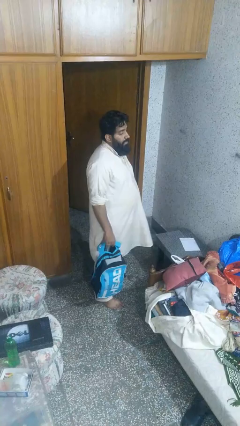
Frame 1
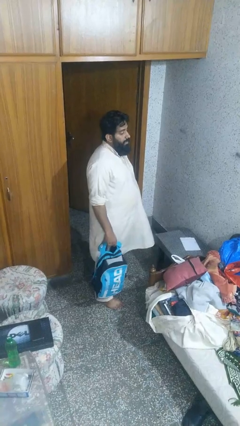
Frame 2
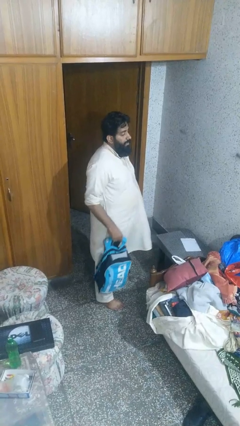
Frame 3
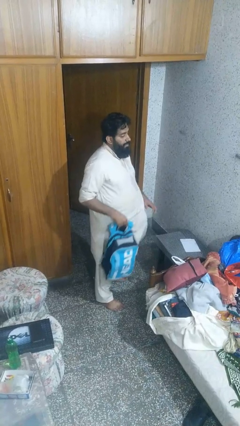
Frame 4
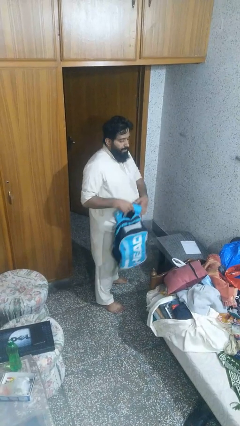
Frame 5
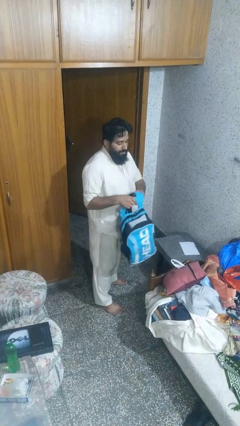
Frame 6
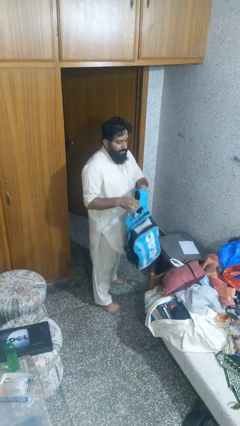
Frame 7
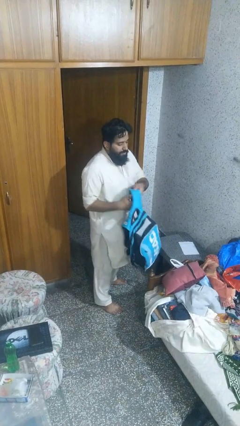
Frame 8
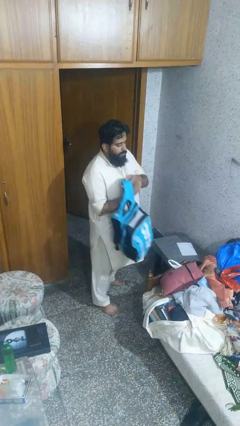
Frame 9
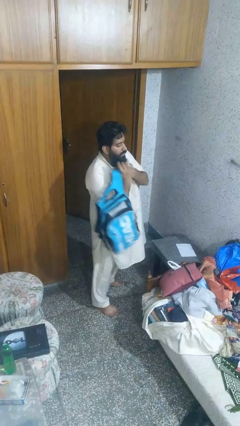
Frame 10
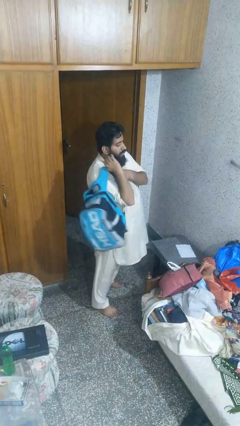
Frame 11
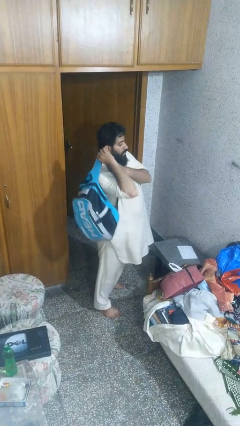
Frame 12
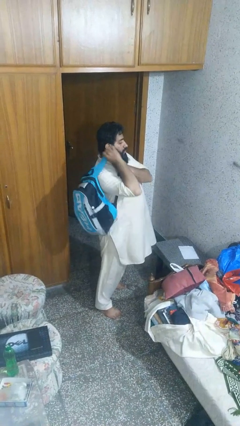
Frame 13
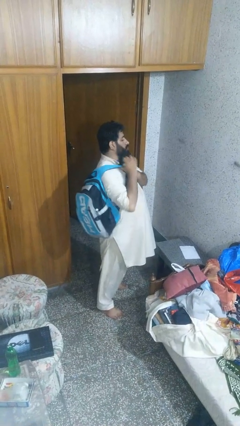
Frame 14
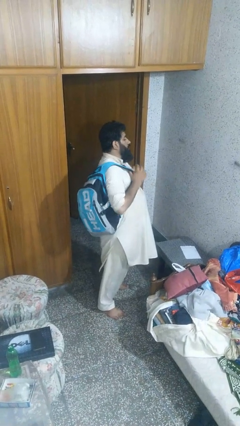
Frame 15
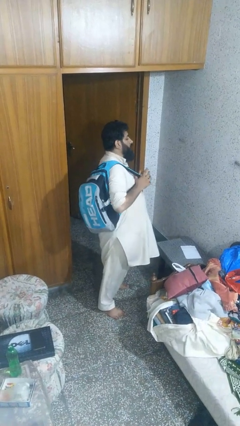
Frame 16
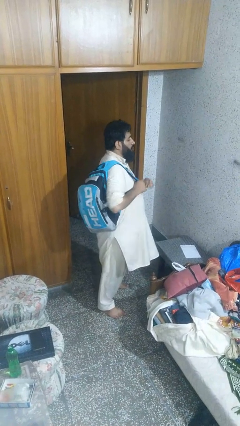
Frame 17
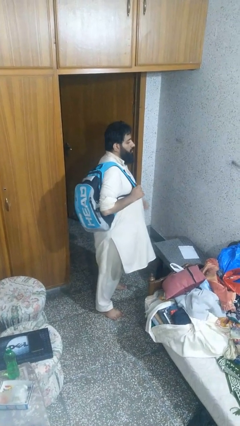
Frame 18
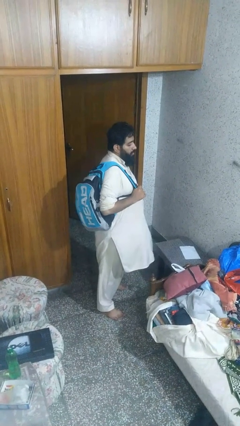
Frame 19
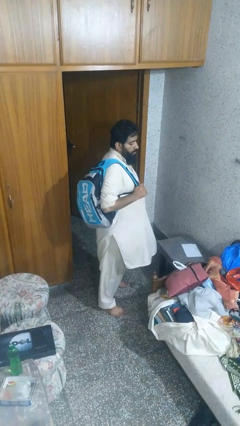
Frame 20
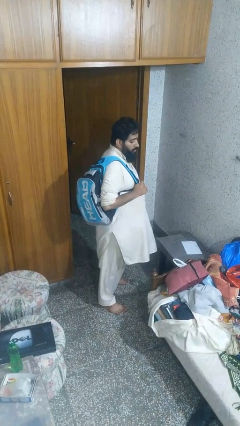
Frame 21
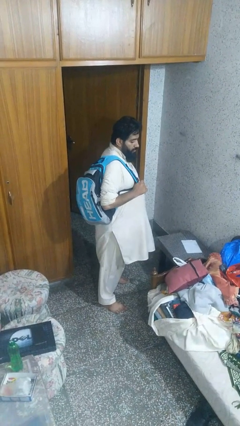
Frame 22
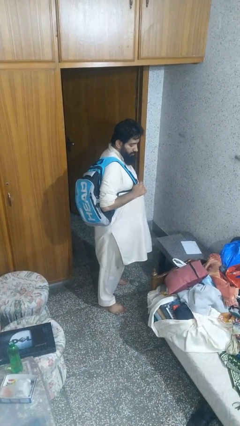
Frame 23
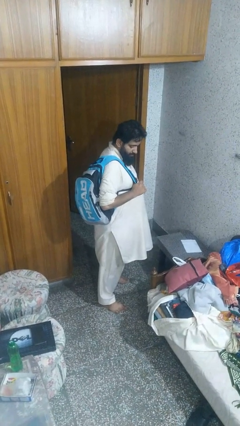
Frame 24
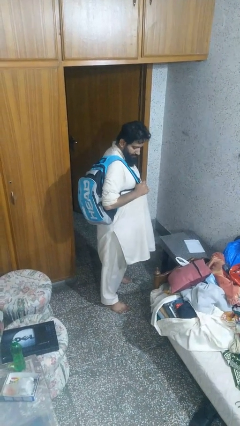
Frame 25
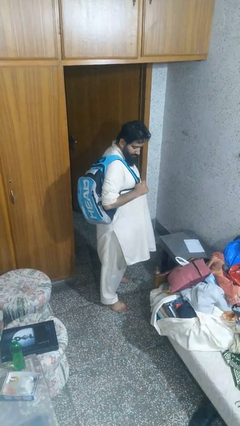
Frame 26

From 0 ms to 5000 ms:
person puts on backpack

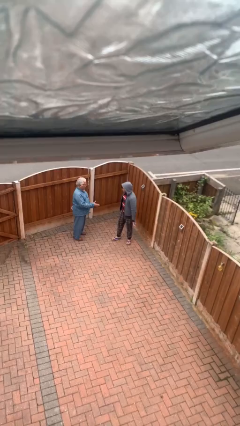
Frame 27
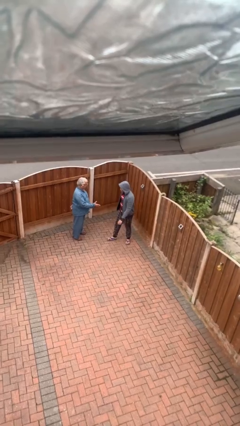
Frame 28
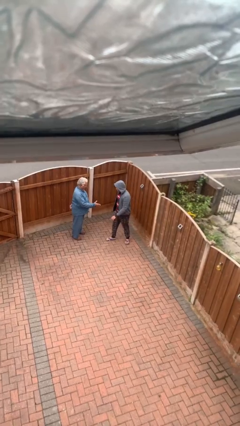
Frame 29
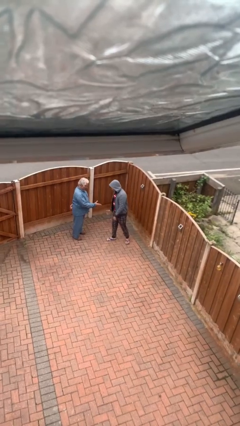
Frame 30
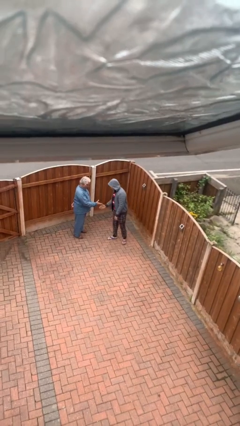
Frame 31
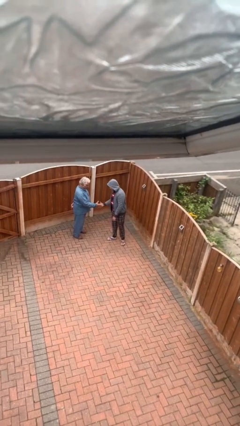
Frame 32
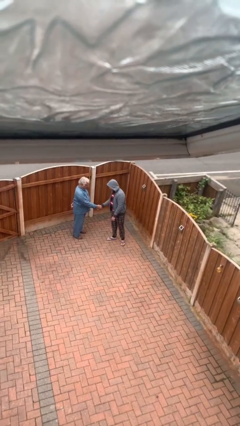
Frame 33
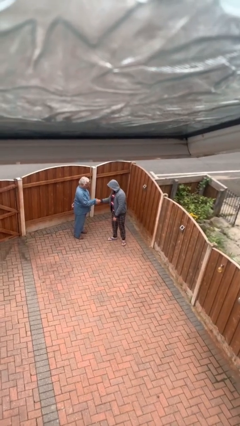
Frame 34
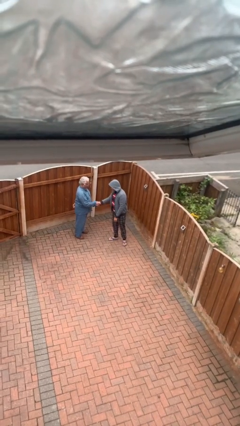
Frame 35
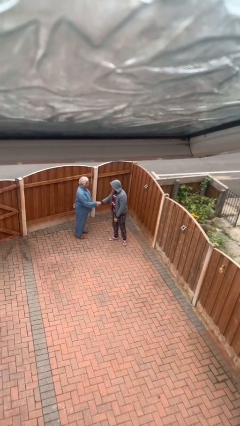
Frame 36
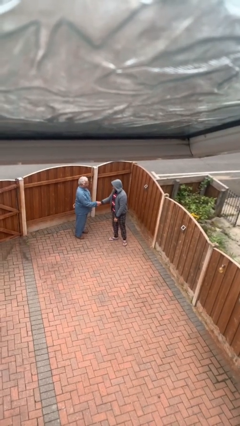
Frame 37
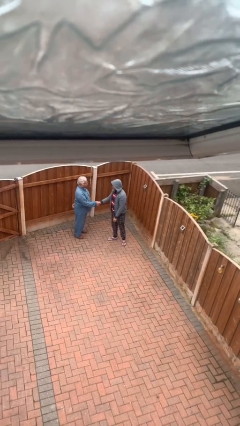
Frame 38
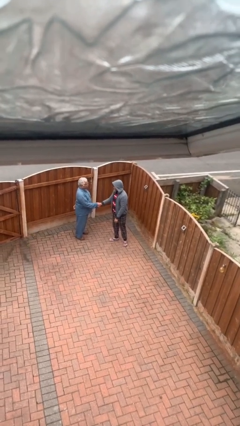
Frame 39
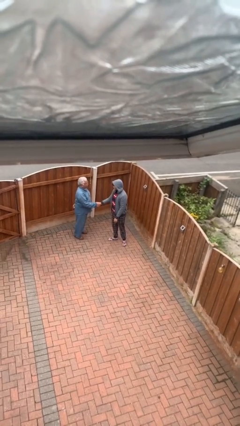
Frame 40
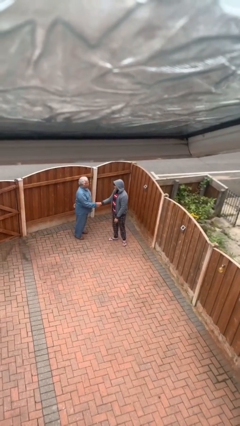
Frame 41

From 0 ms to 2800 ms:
person shakes hand

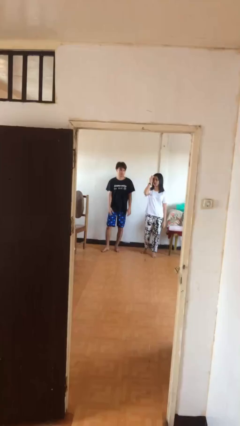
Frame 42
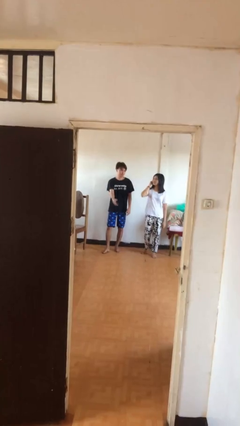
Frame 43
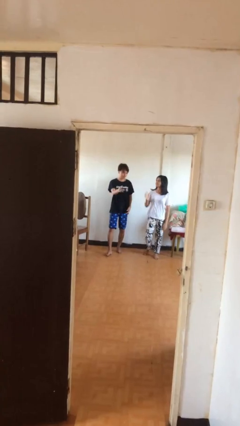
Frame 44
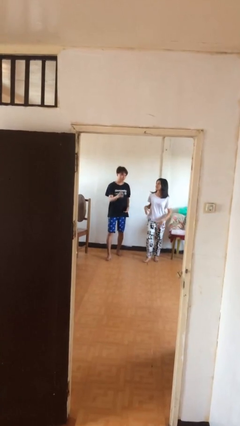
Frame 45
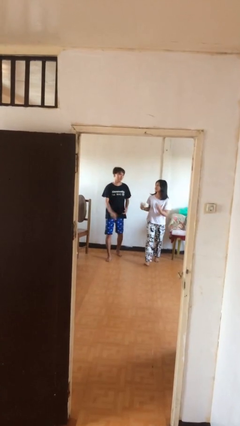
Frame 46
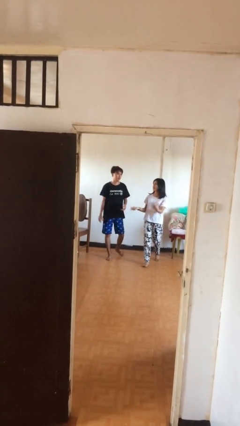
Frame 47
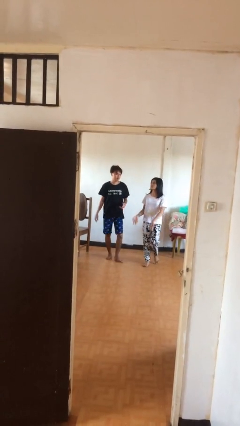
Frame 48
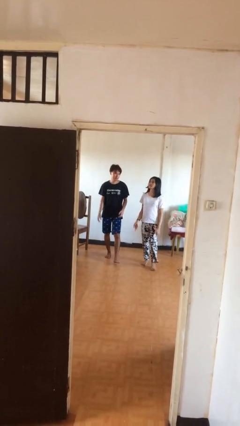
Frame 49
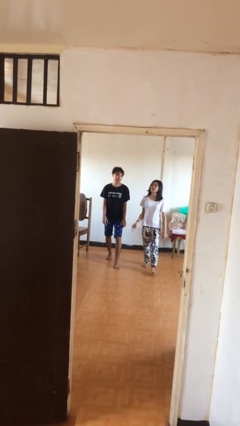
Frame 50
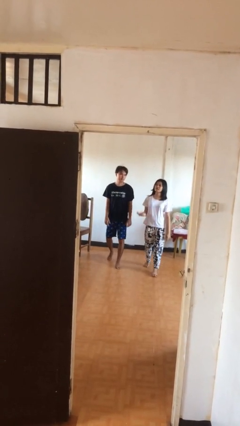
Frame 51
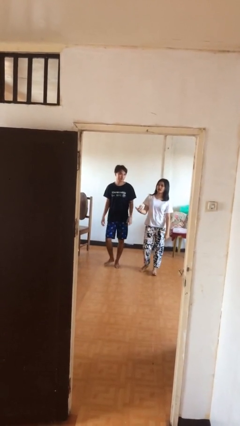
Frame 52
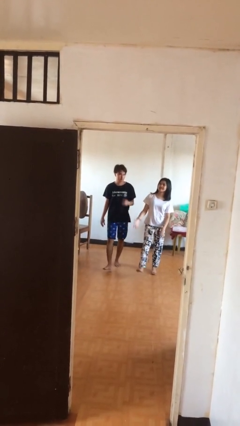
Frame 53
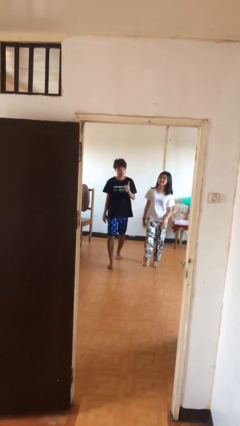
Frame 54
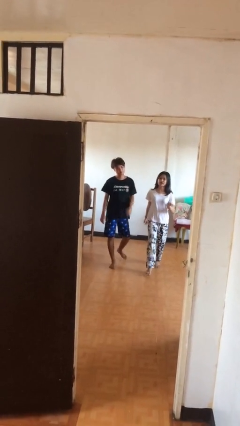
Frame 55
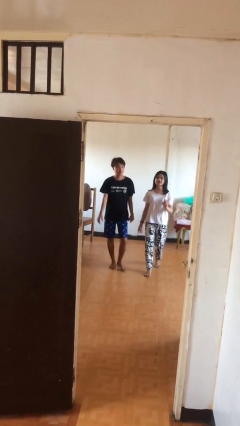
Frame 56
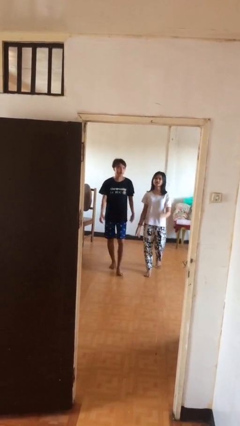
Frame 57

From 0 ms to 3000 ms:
person talks to person

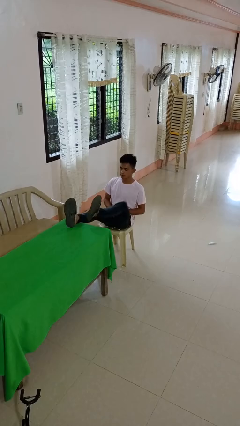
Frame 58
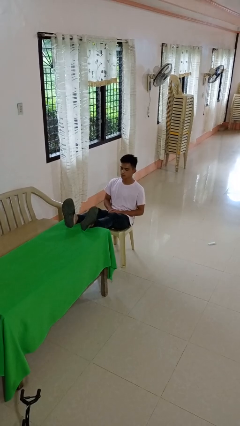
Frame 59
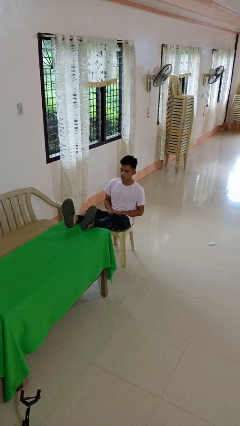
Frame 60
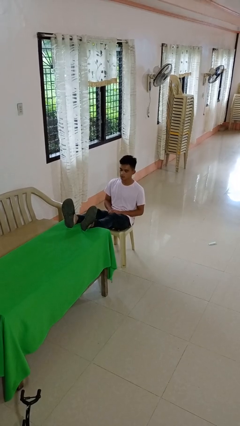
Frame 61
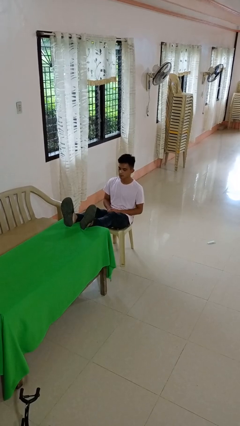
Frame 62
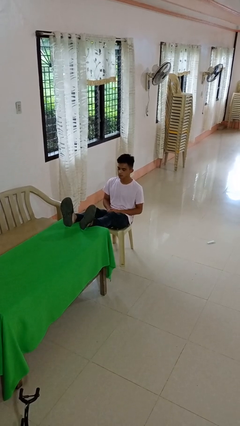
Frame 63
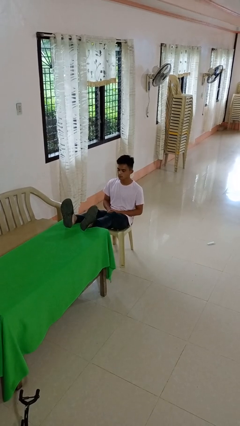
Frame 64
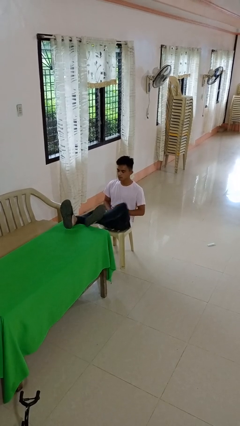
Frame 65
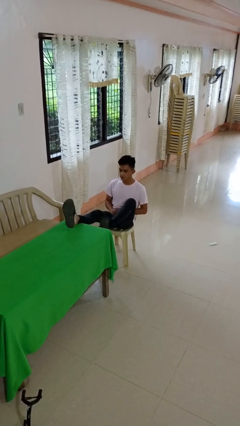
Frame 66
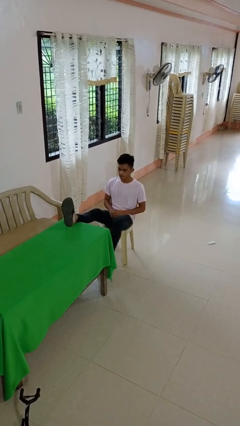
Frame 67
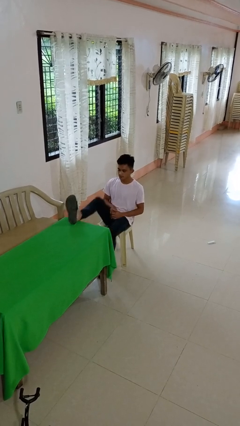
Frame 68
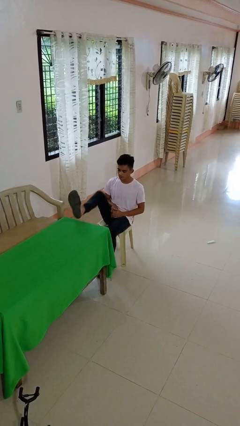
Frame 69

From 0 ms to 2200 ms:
person puts feet up

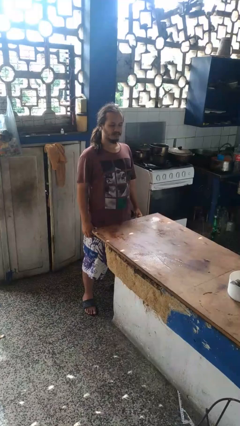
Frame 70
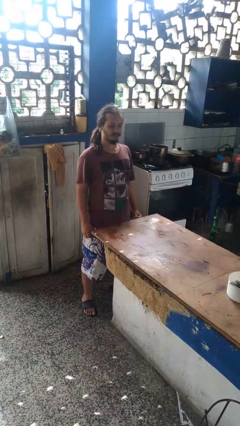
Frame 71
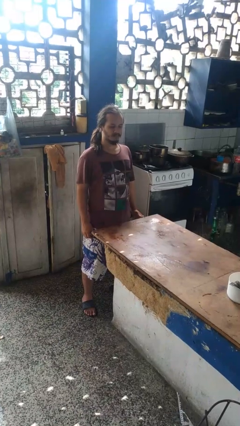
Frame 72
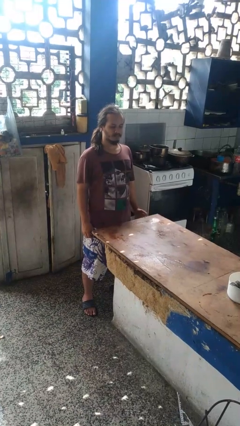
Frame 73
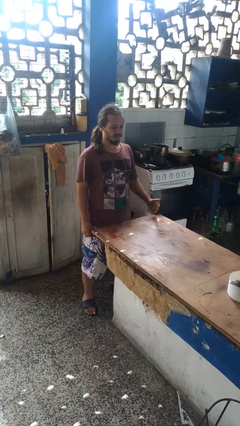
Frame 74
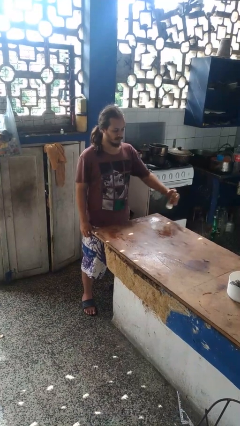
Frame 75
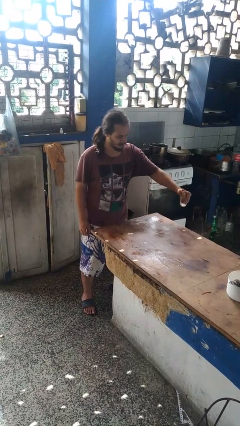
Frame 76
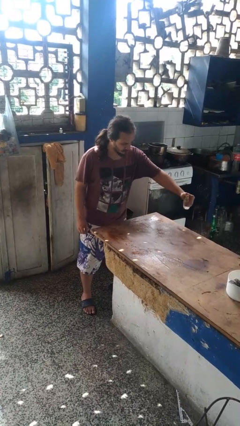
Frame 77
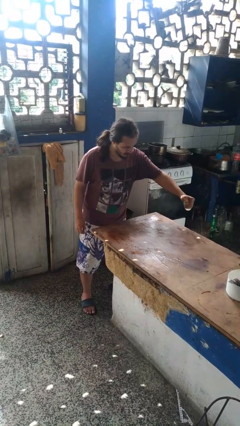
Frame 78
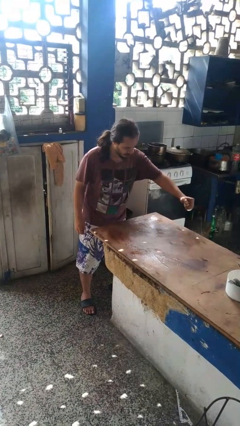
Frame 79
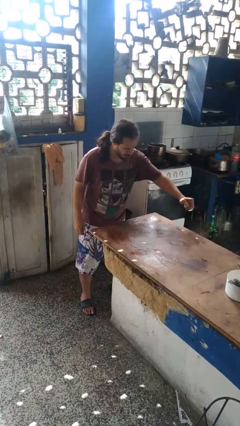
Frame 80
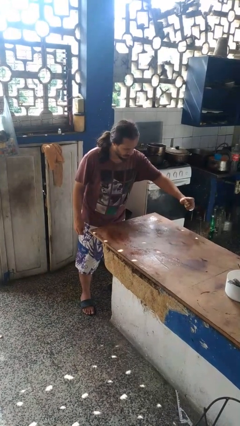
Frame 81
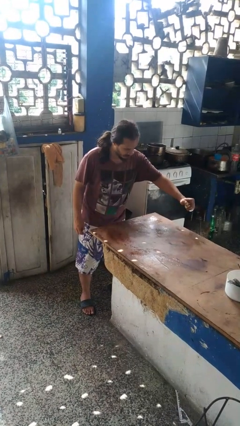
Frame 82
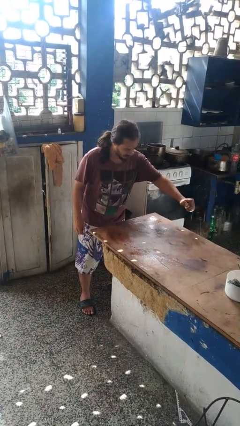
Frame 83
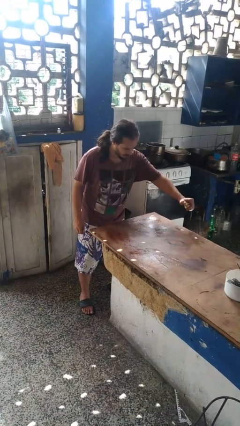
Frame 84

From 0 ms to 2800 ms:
person sprays from bottle

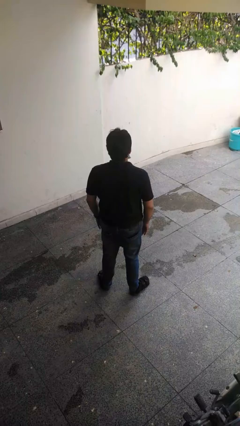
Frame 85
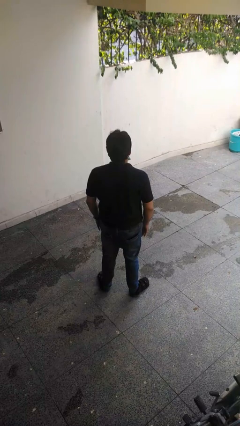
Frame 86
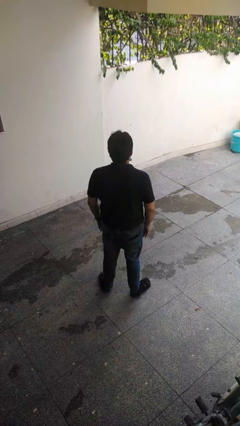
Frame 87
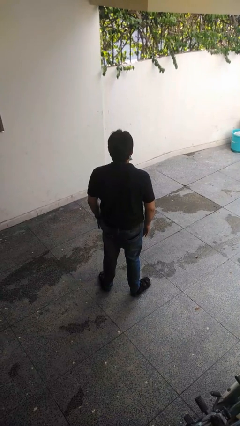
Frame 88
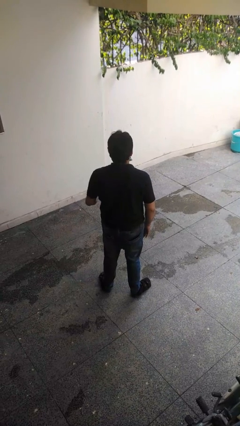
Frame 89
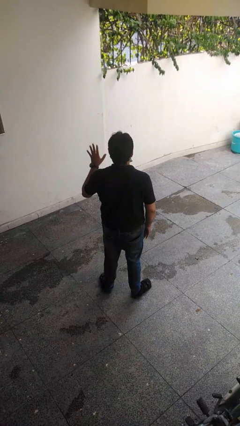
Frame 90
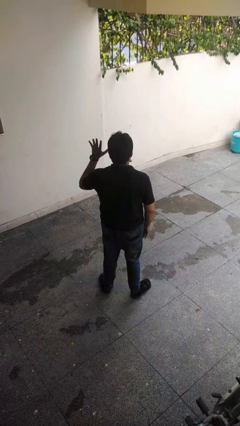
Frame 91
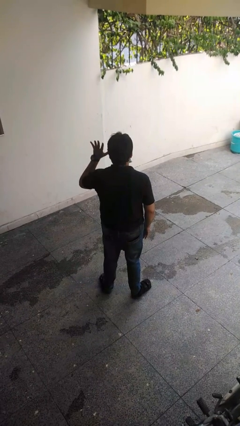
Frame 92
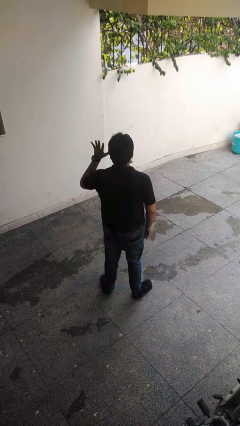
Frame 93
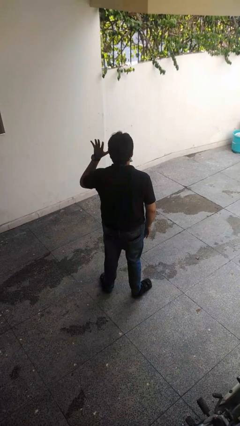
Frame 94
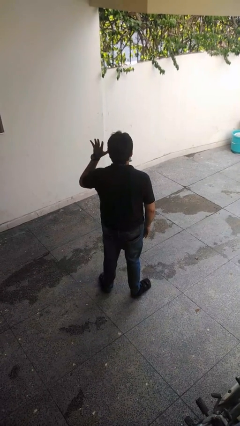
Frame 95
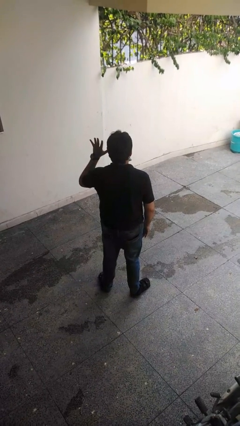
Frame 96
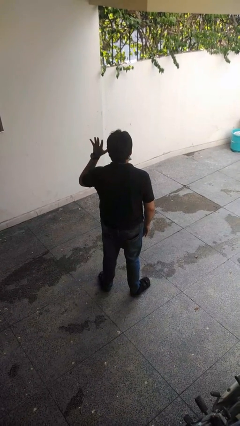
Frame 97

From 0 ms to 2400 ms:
person gestures number five
